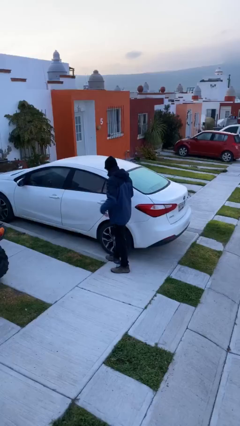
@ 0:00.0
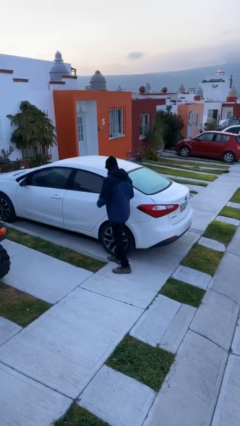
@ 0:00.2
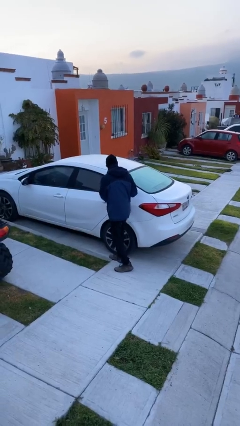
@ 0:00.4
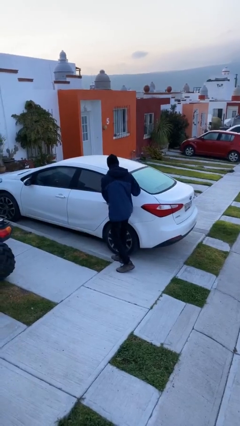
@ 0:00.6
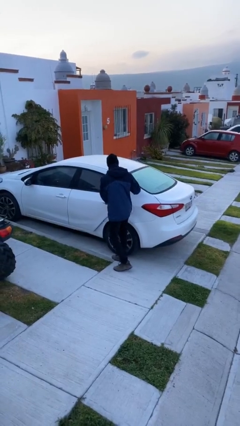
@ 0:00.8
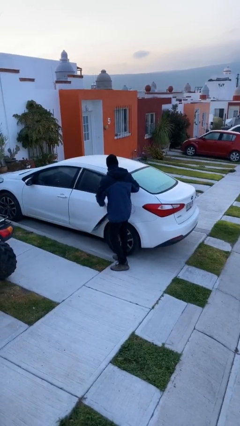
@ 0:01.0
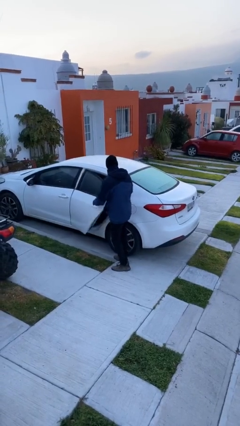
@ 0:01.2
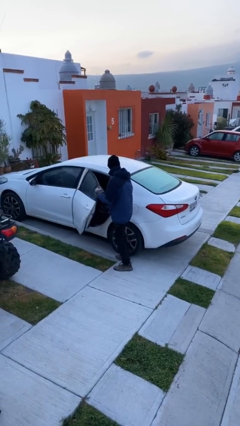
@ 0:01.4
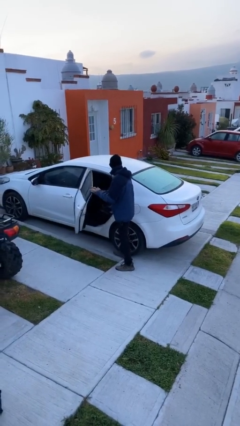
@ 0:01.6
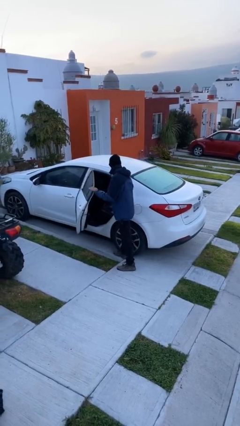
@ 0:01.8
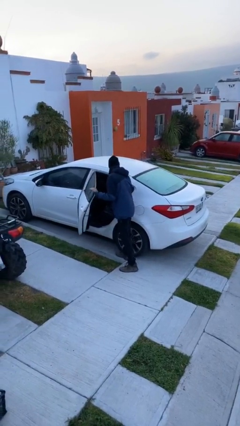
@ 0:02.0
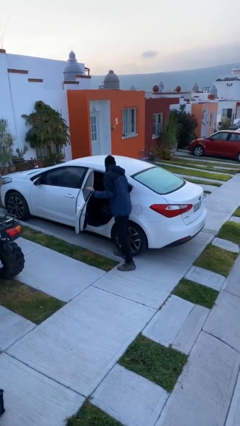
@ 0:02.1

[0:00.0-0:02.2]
person opens car door

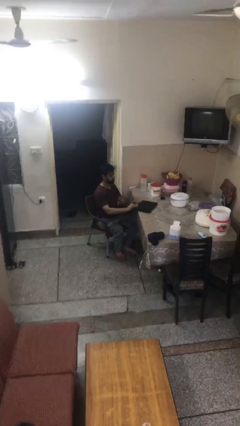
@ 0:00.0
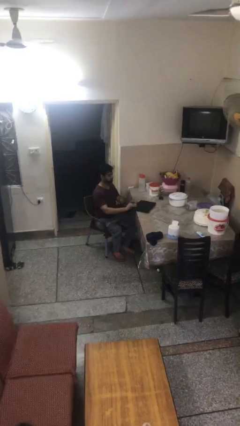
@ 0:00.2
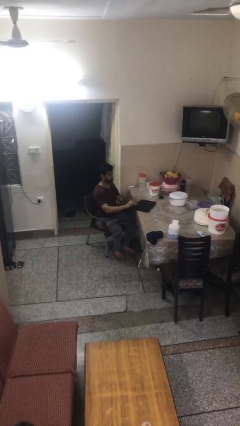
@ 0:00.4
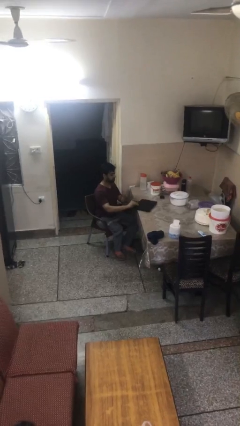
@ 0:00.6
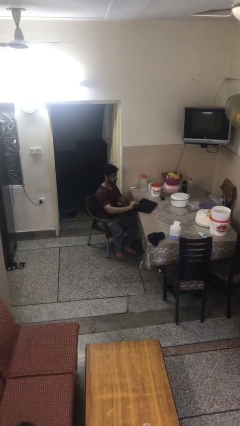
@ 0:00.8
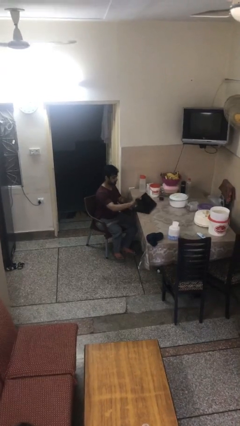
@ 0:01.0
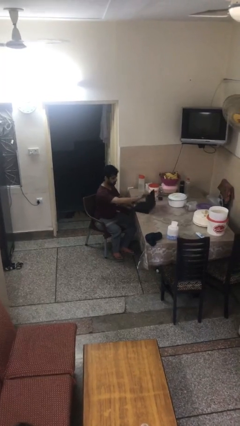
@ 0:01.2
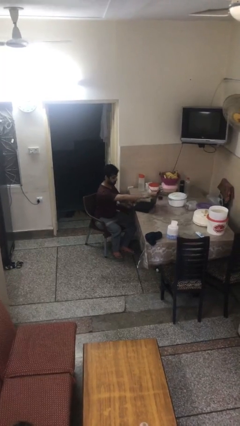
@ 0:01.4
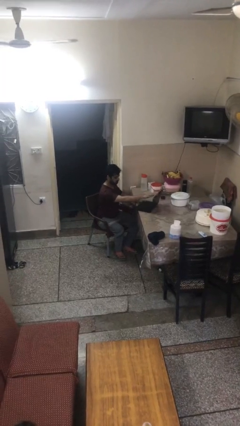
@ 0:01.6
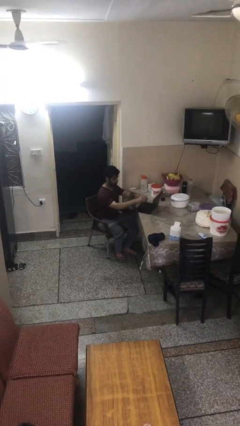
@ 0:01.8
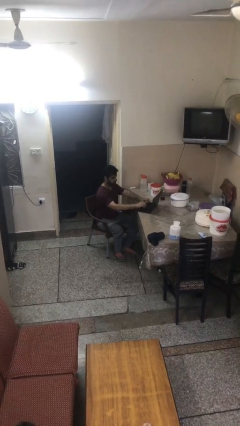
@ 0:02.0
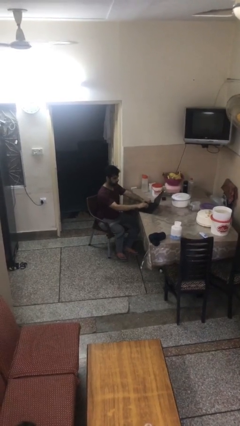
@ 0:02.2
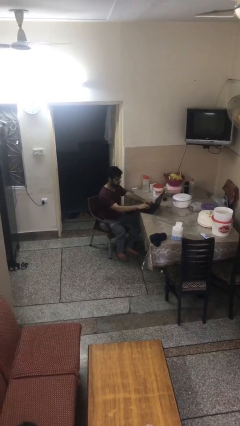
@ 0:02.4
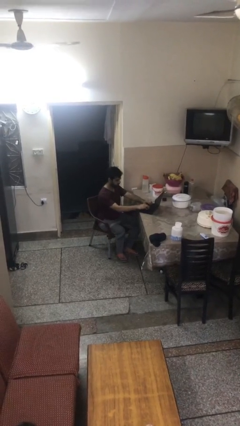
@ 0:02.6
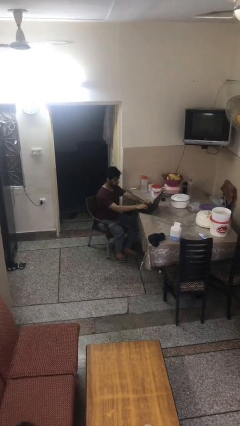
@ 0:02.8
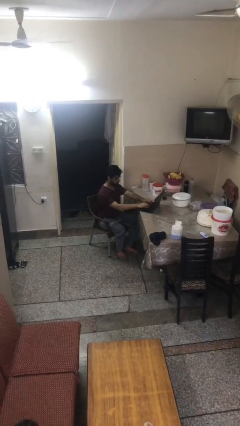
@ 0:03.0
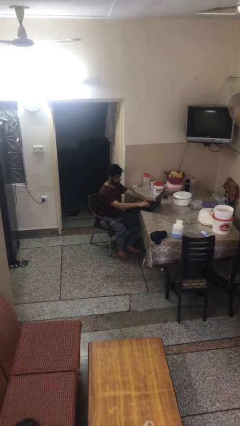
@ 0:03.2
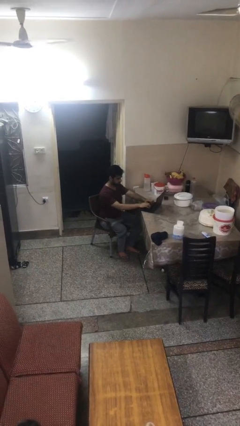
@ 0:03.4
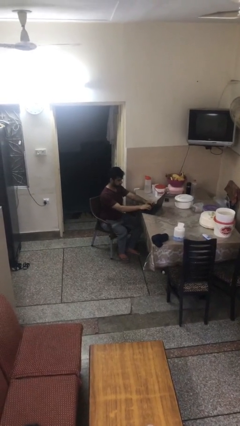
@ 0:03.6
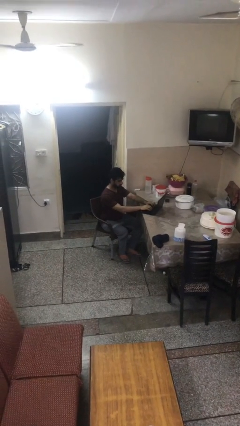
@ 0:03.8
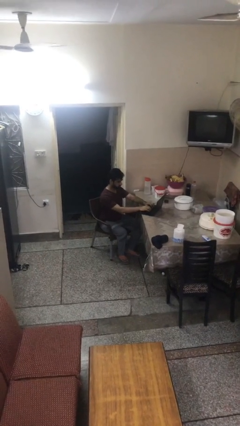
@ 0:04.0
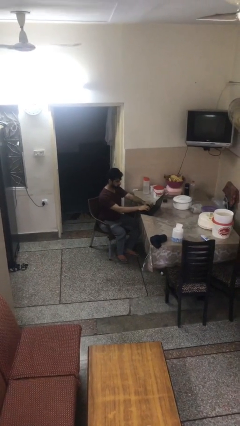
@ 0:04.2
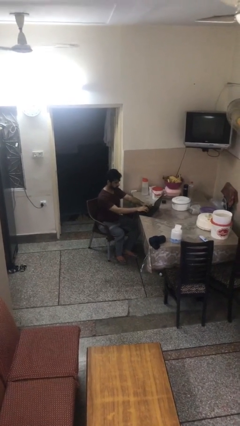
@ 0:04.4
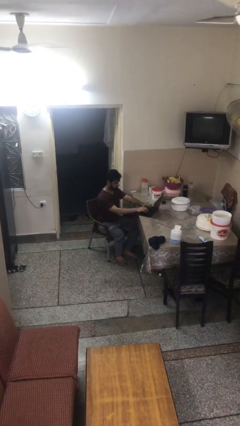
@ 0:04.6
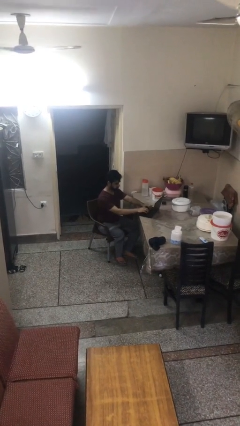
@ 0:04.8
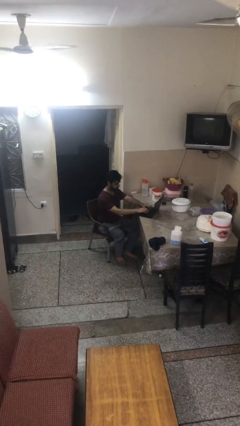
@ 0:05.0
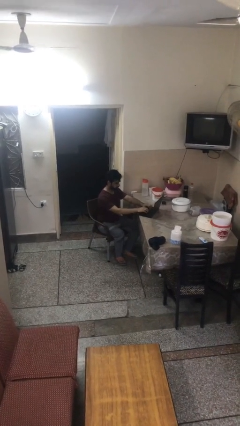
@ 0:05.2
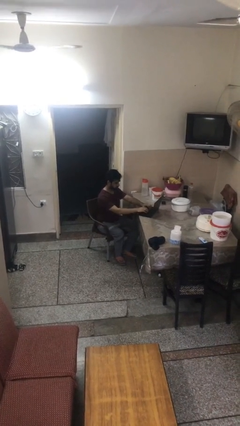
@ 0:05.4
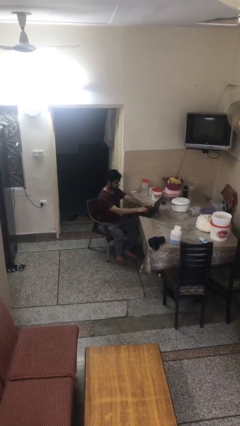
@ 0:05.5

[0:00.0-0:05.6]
person interacts with laptop

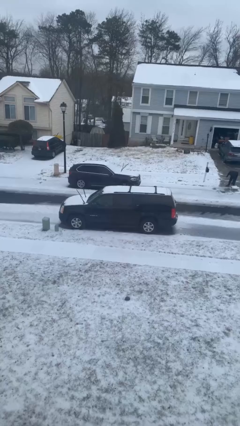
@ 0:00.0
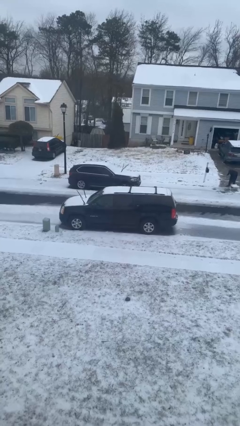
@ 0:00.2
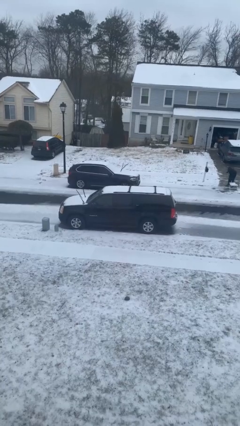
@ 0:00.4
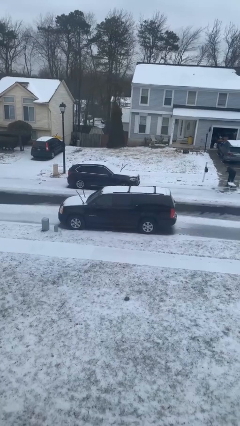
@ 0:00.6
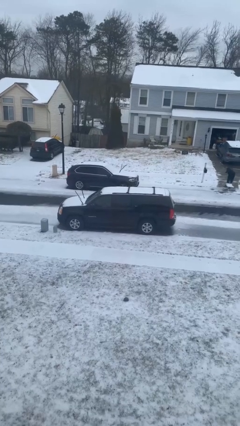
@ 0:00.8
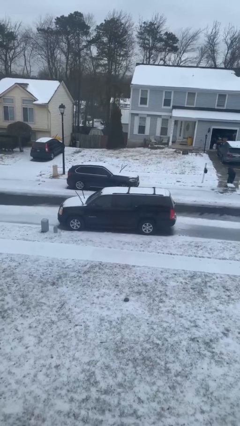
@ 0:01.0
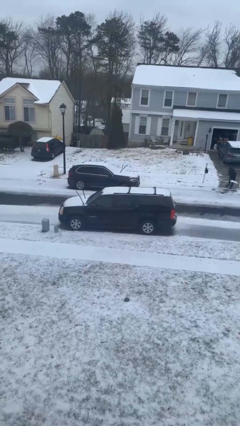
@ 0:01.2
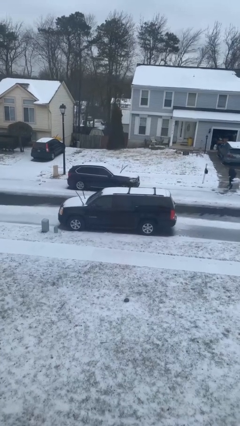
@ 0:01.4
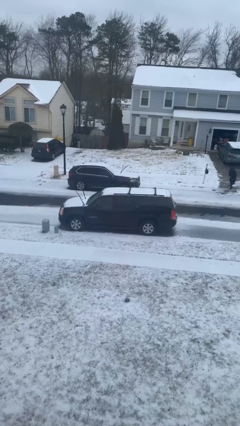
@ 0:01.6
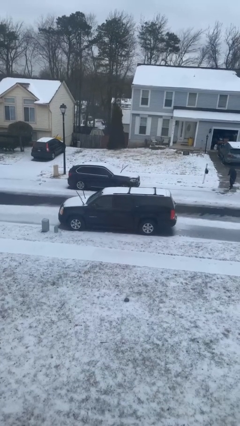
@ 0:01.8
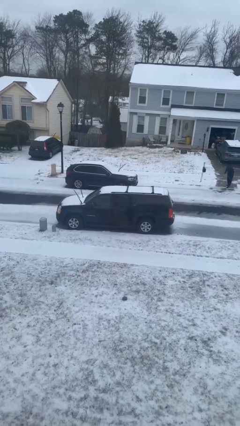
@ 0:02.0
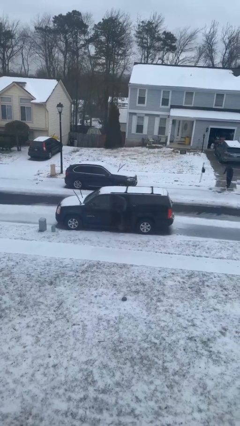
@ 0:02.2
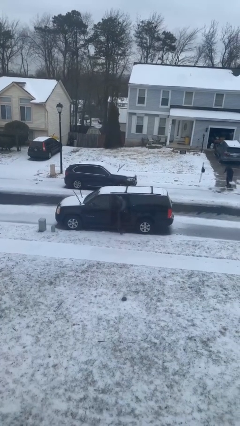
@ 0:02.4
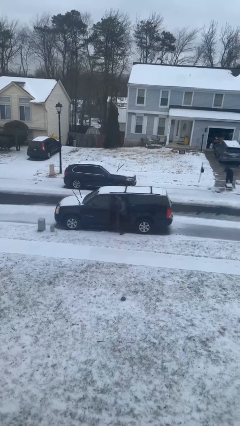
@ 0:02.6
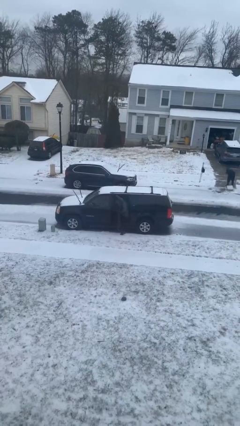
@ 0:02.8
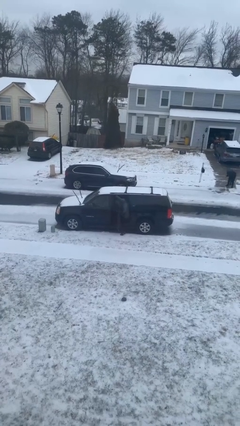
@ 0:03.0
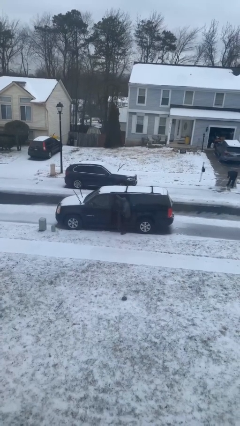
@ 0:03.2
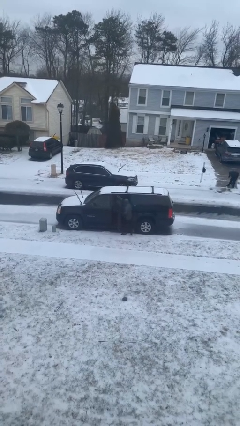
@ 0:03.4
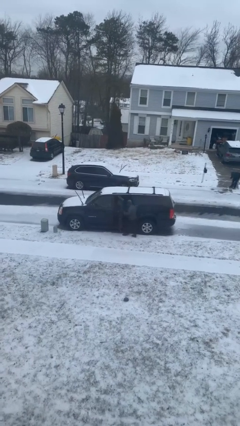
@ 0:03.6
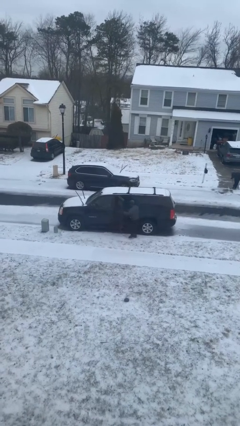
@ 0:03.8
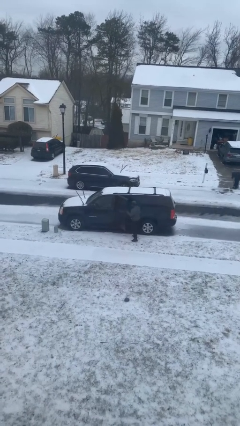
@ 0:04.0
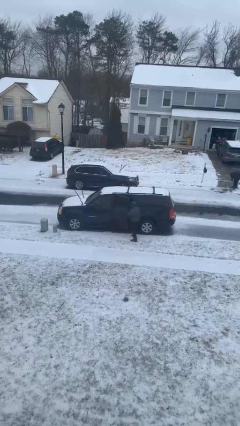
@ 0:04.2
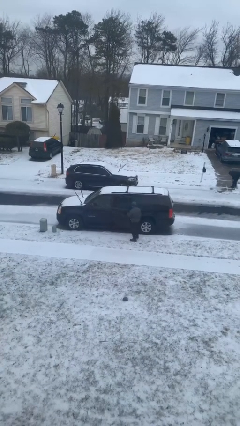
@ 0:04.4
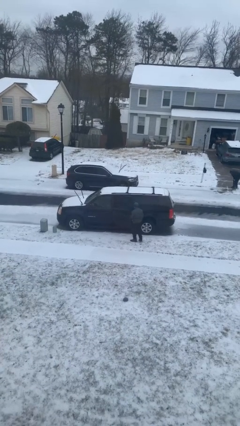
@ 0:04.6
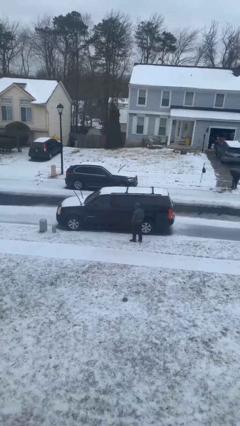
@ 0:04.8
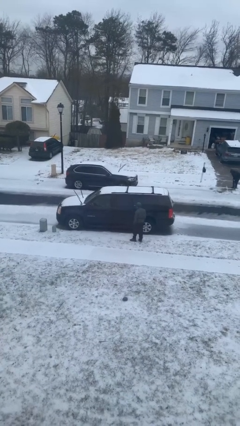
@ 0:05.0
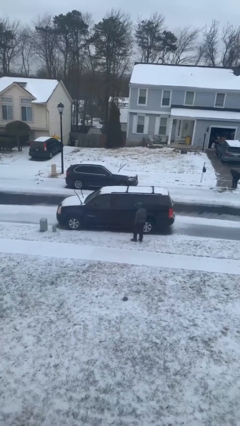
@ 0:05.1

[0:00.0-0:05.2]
car drops off person

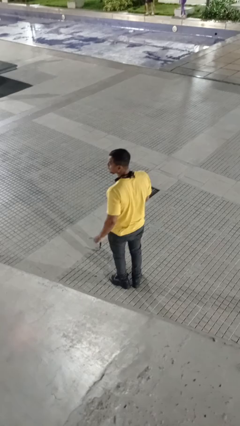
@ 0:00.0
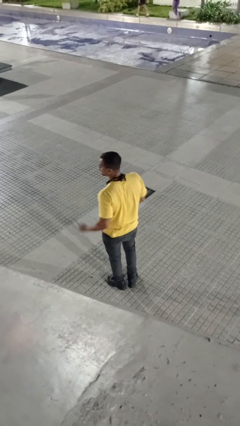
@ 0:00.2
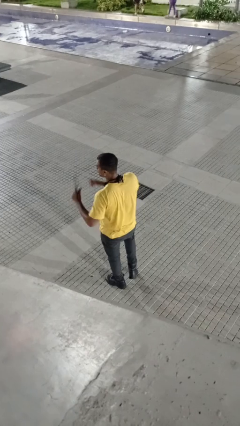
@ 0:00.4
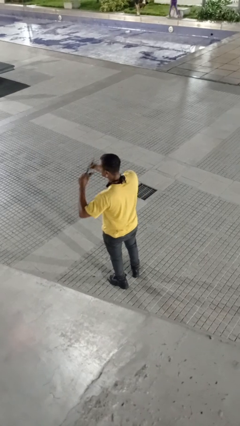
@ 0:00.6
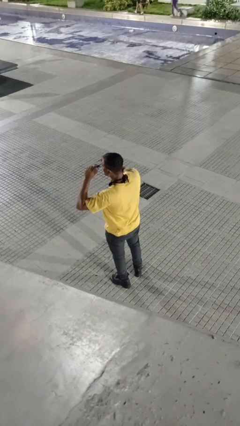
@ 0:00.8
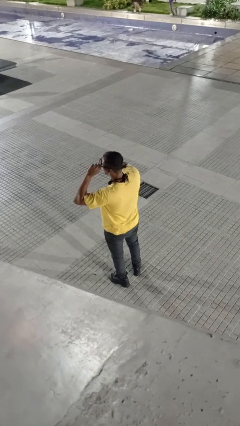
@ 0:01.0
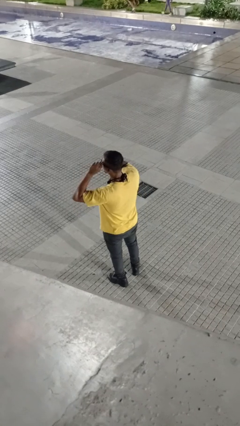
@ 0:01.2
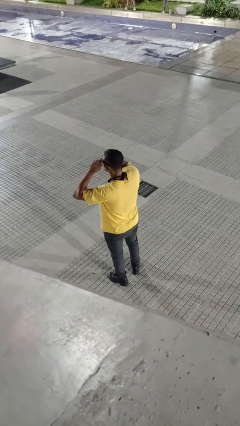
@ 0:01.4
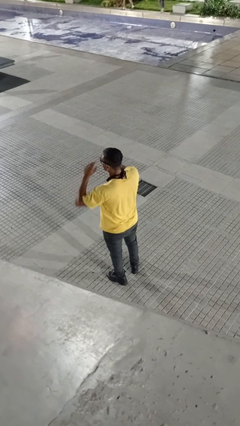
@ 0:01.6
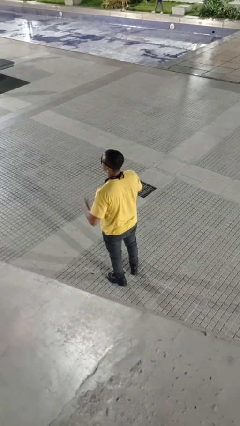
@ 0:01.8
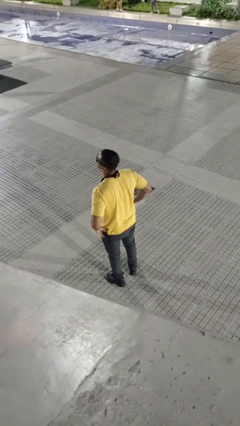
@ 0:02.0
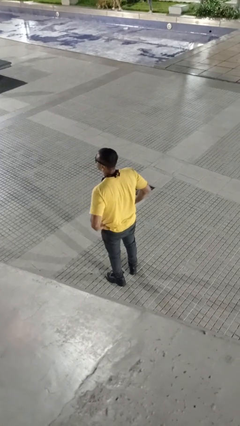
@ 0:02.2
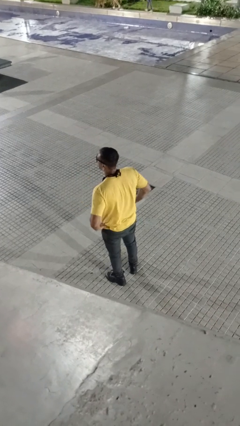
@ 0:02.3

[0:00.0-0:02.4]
person puts on glasses

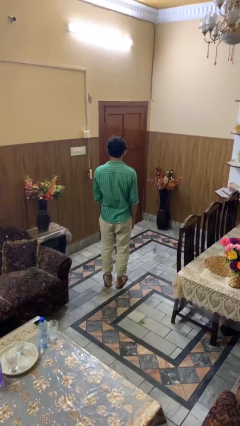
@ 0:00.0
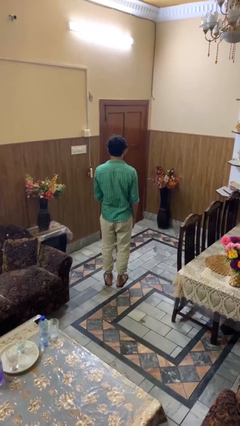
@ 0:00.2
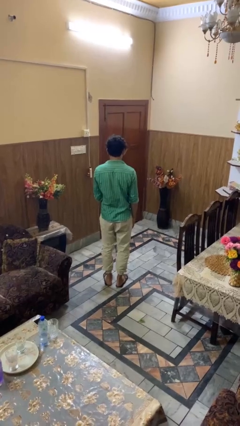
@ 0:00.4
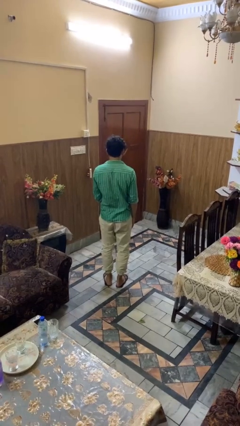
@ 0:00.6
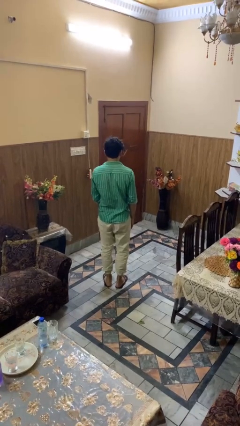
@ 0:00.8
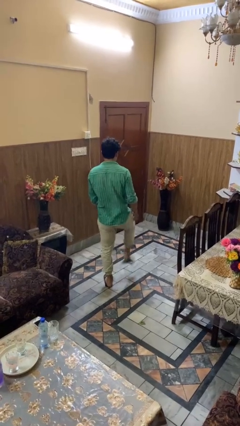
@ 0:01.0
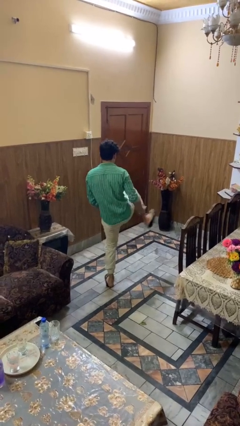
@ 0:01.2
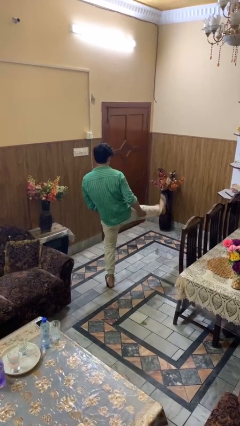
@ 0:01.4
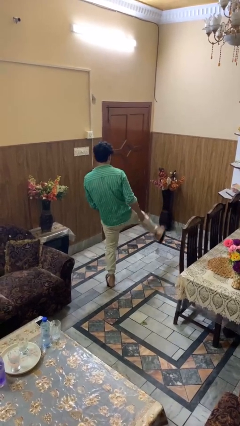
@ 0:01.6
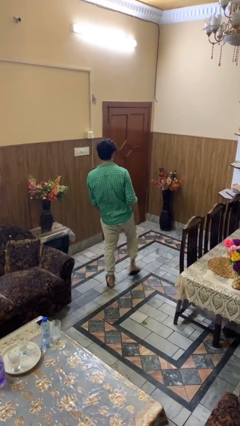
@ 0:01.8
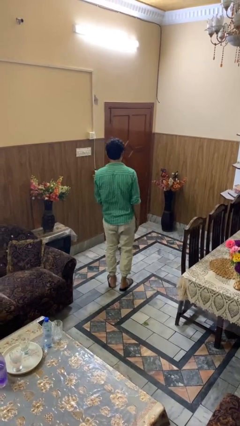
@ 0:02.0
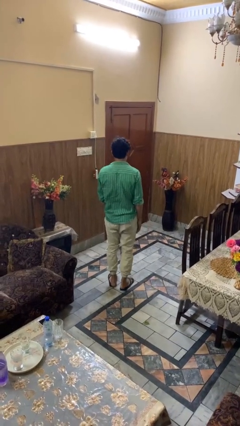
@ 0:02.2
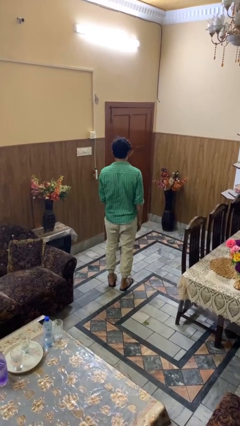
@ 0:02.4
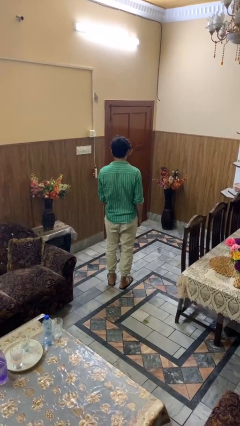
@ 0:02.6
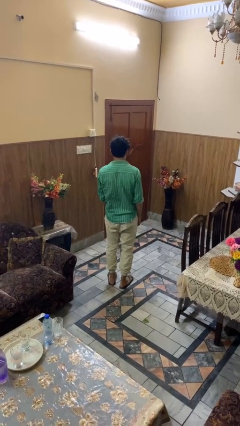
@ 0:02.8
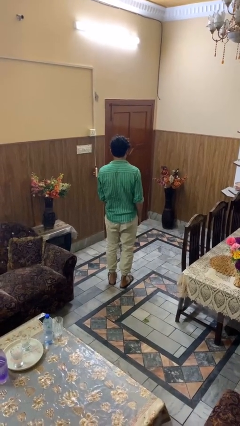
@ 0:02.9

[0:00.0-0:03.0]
person karate kicks
